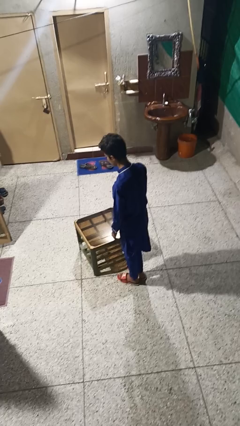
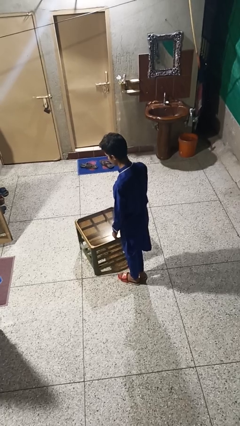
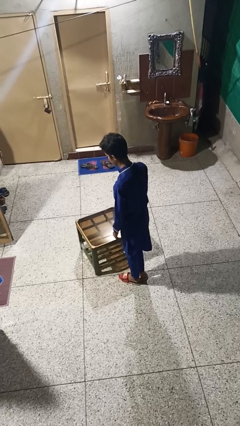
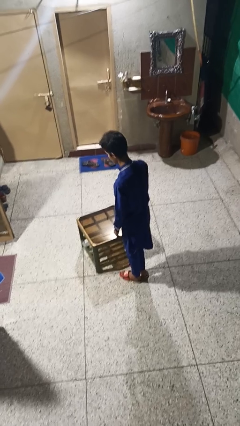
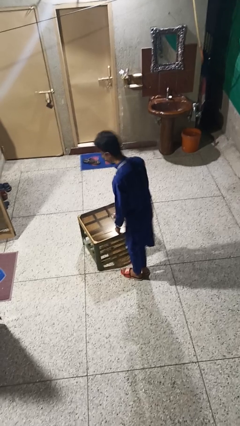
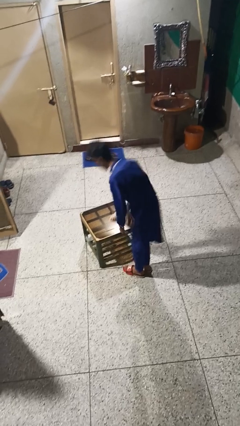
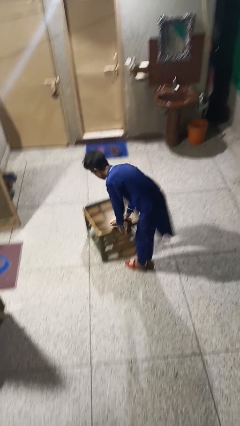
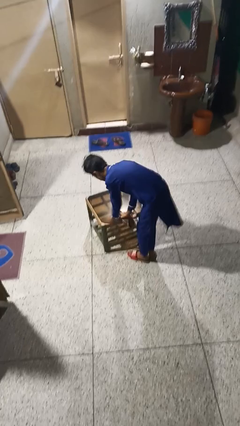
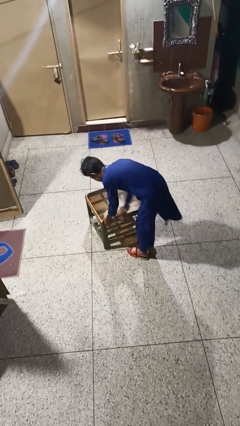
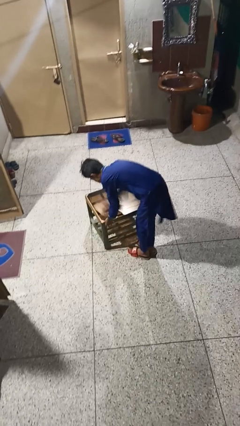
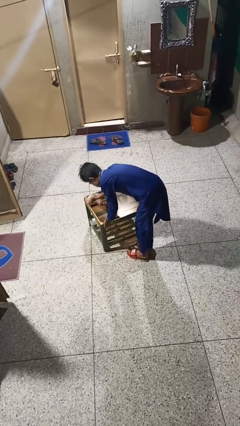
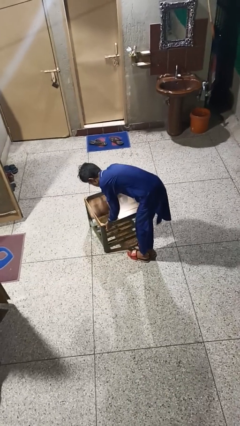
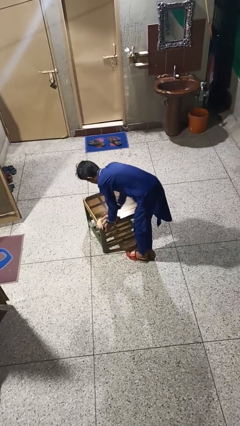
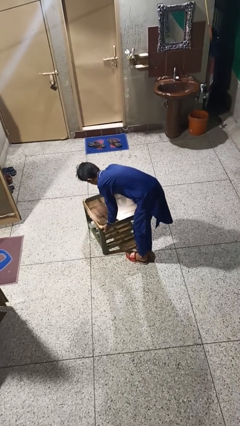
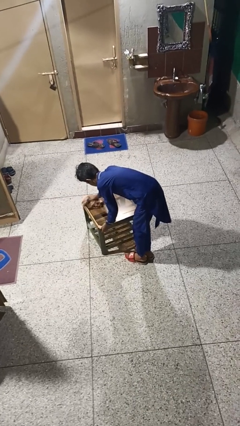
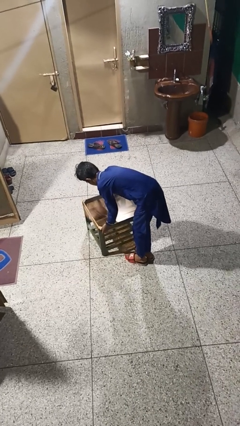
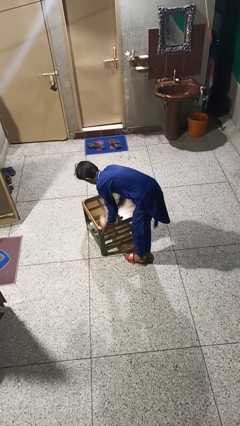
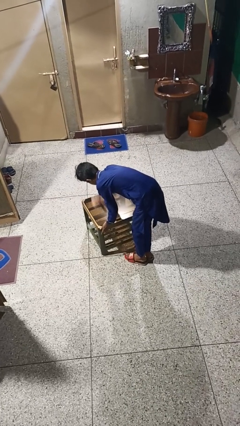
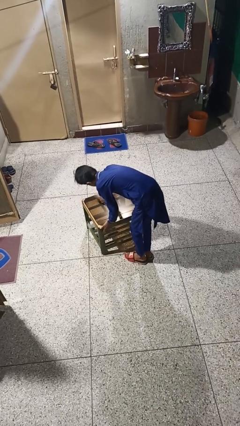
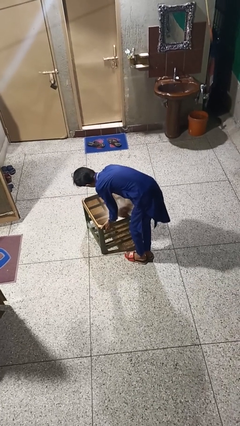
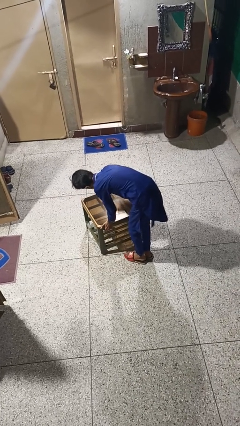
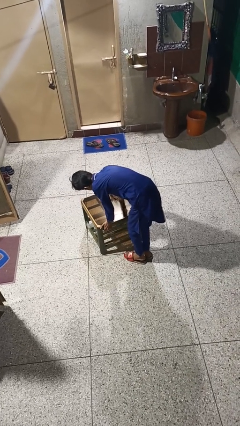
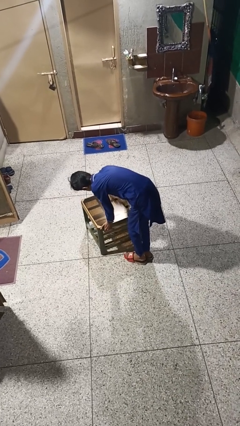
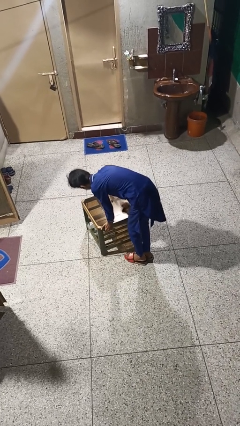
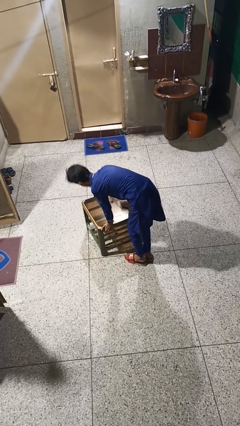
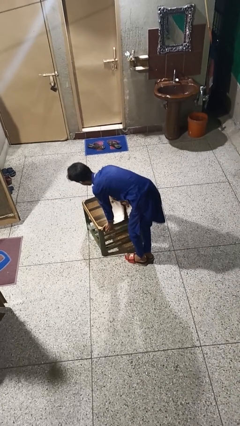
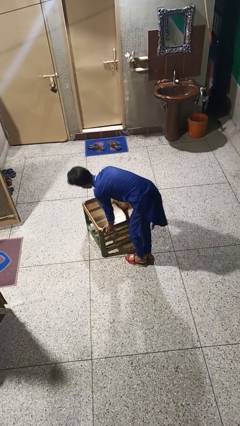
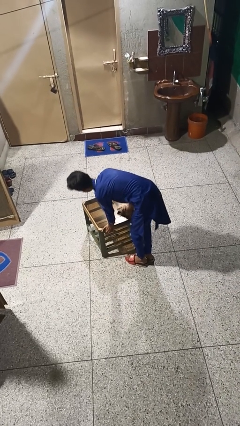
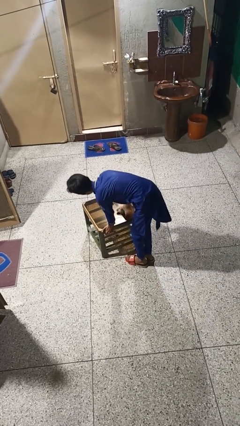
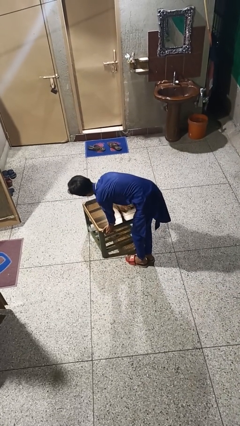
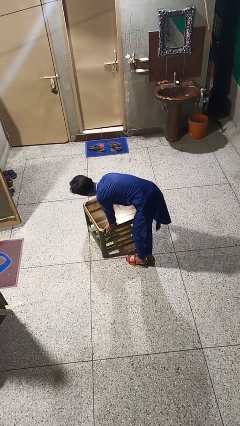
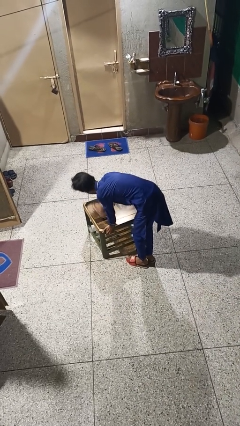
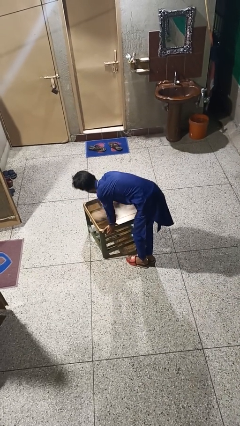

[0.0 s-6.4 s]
person cleans table with rag

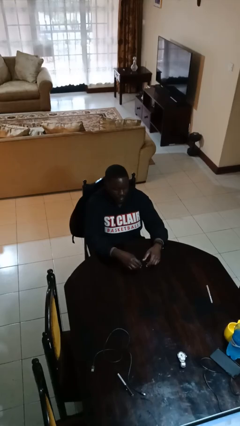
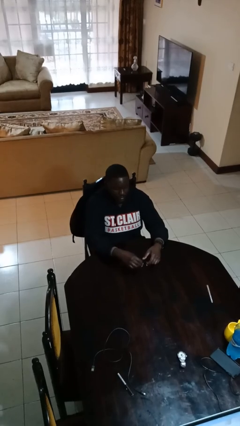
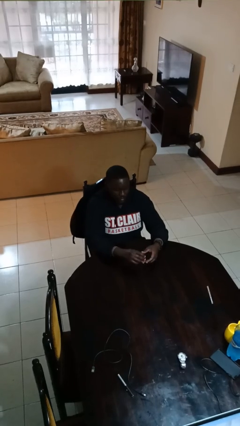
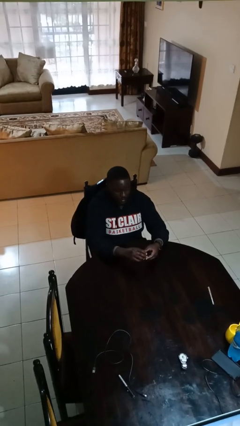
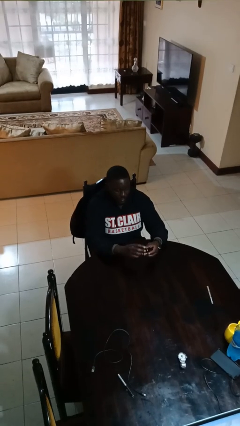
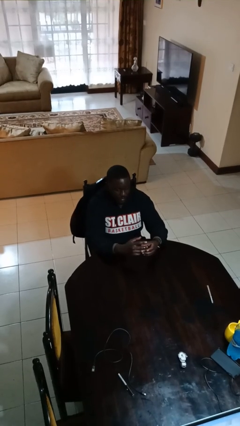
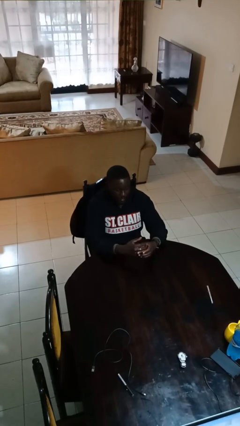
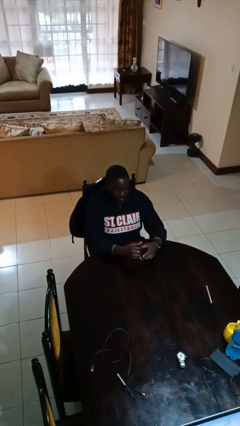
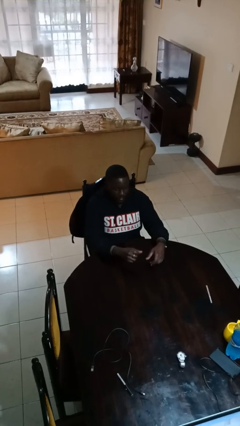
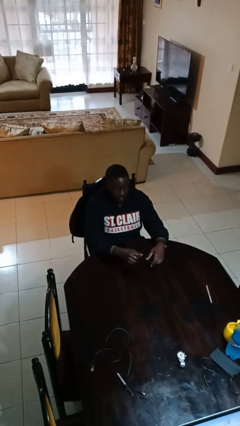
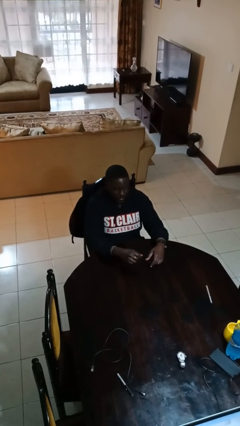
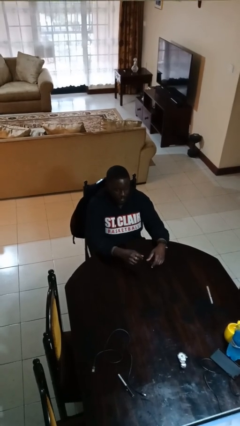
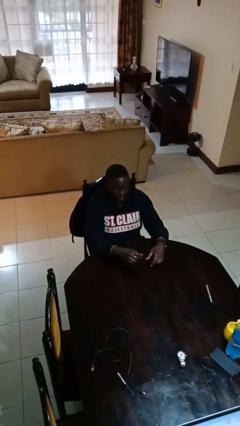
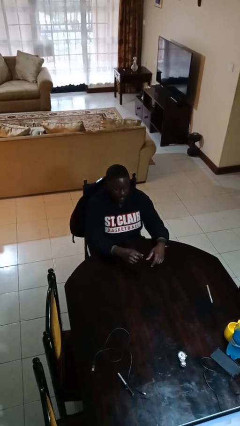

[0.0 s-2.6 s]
person puts on ring

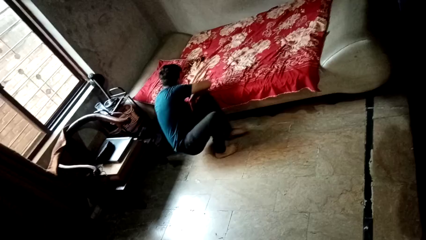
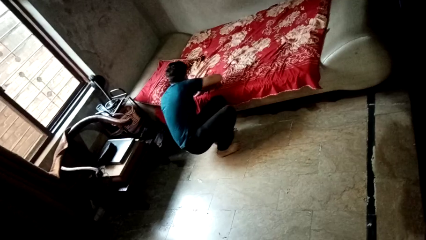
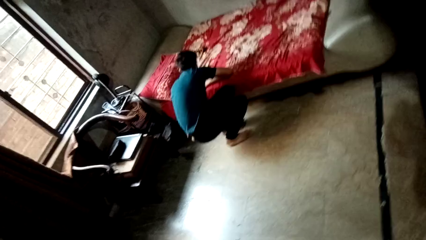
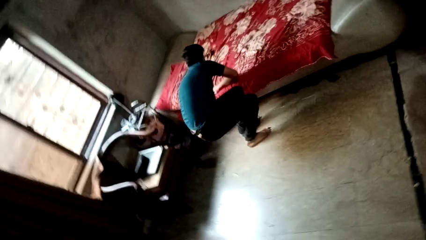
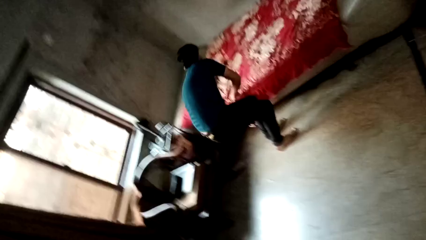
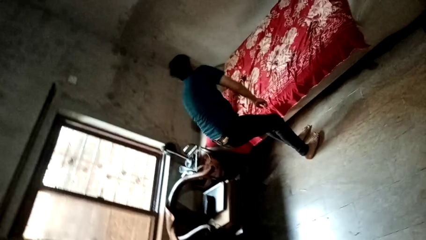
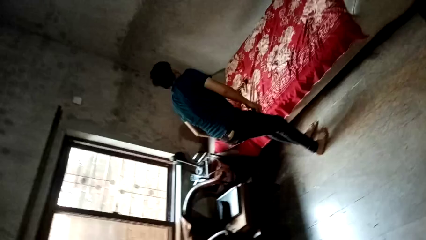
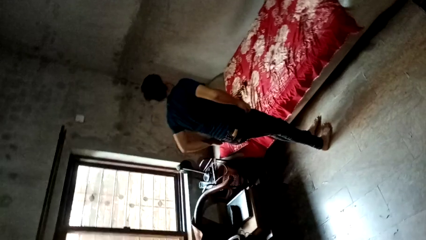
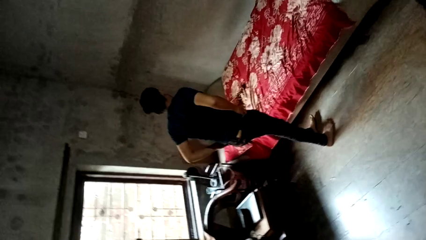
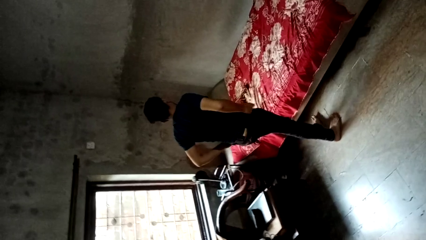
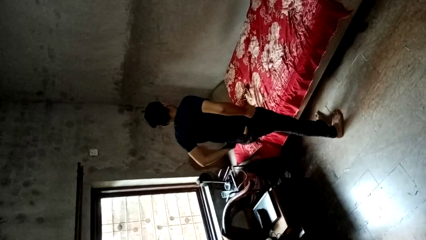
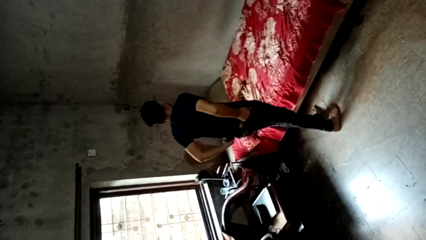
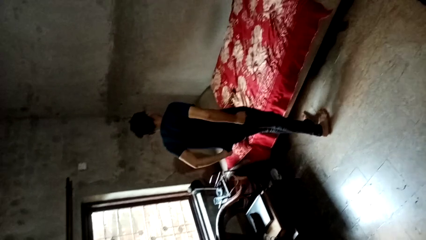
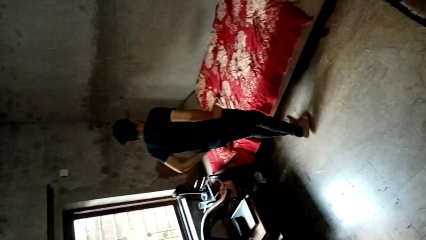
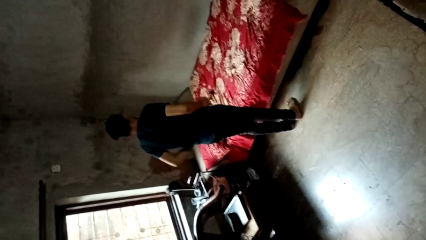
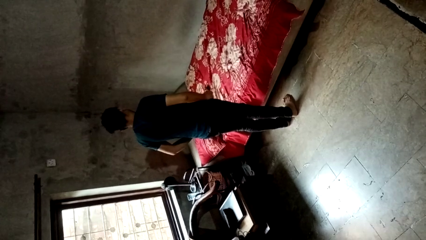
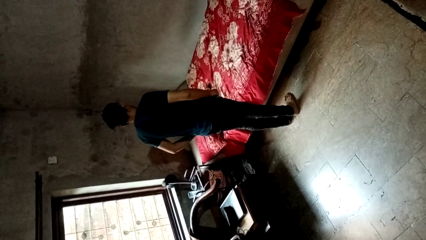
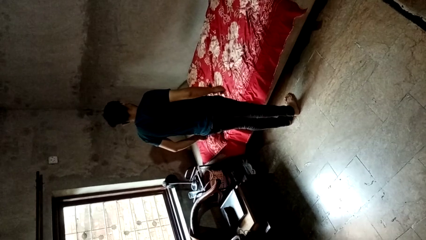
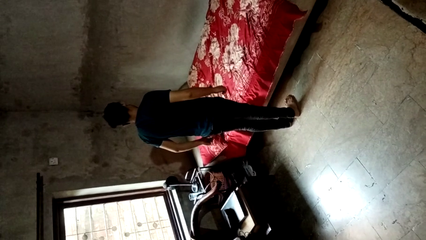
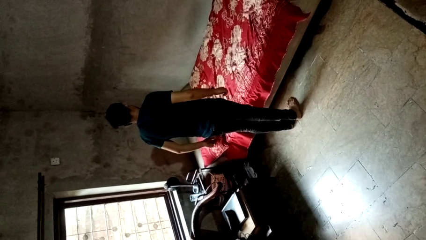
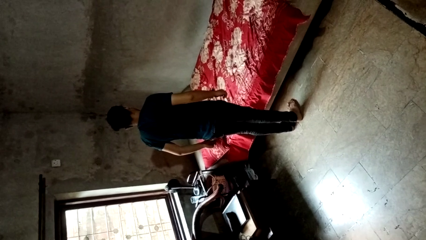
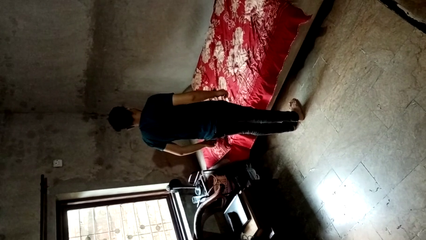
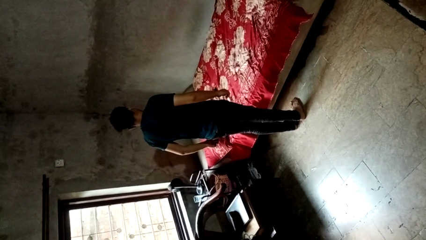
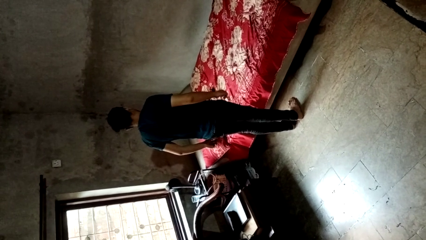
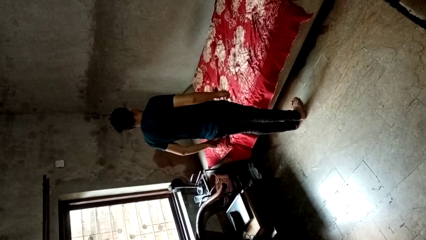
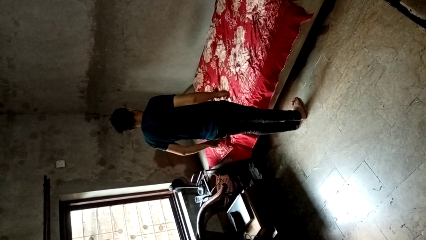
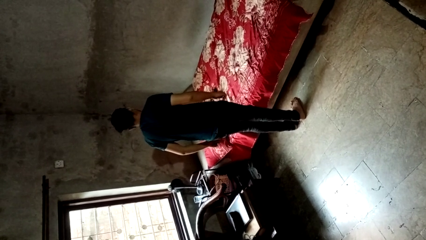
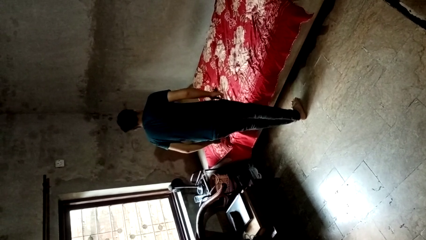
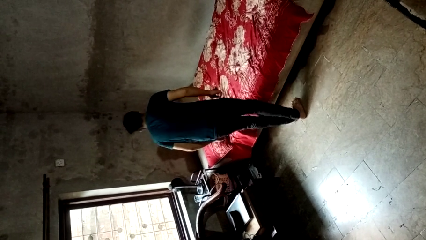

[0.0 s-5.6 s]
person stands up from floor

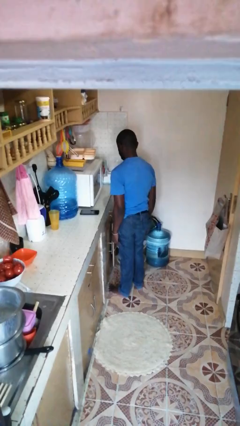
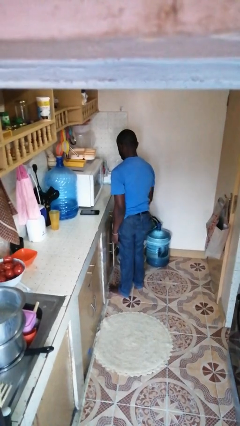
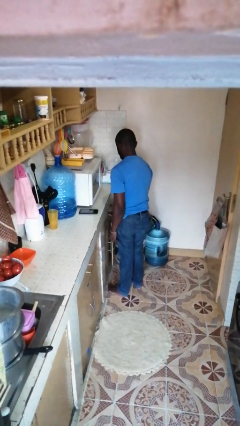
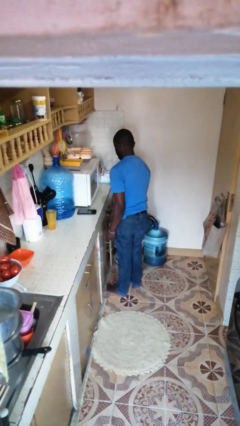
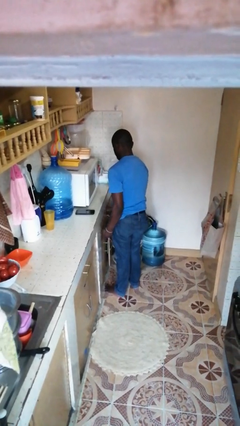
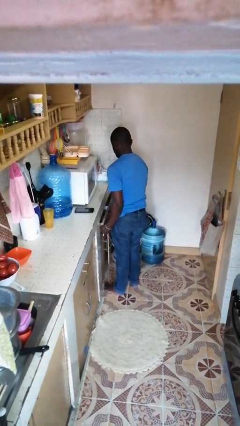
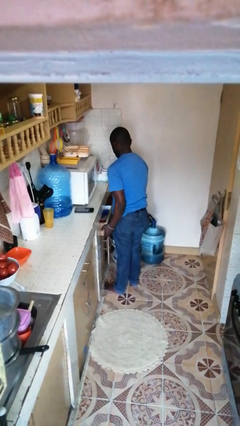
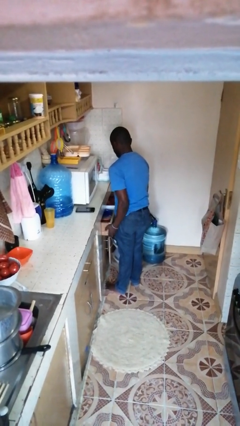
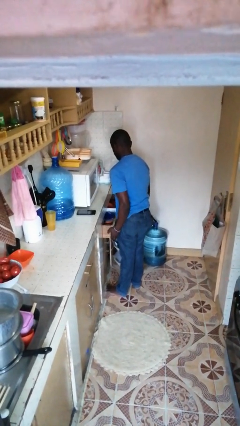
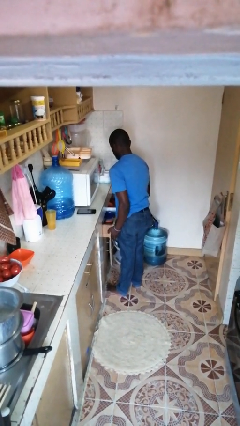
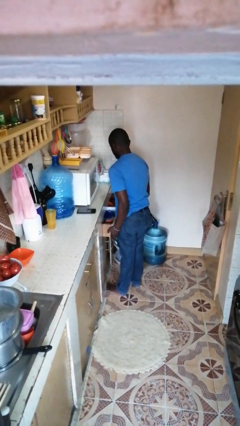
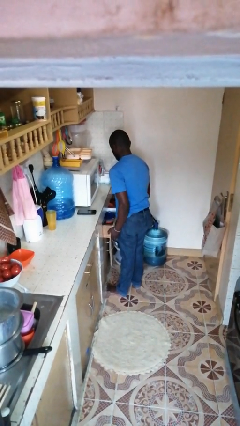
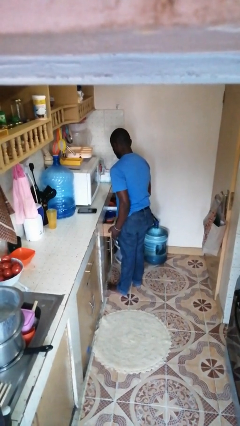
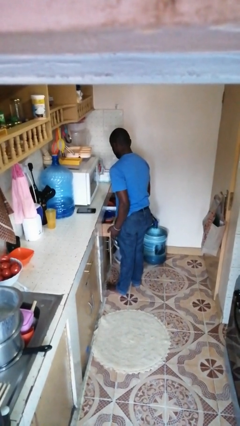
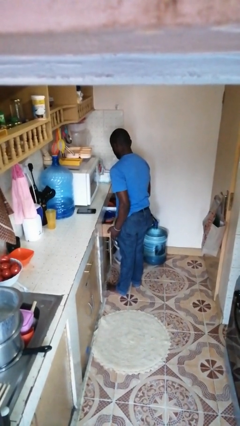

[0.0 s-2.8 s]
person opens kitchen drawer

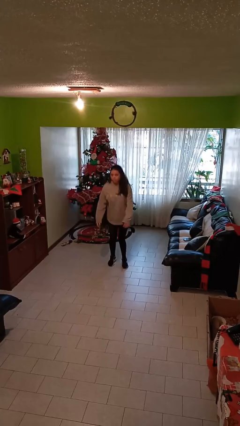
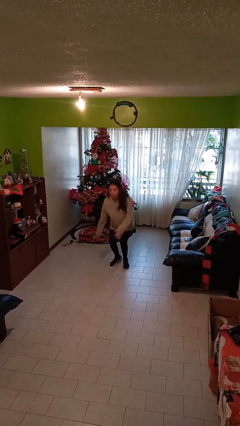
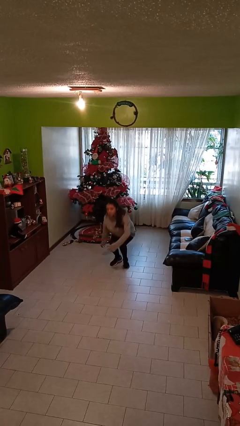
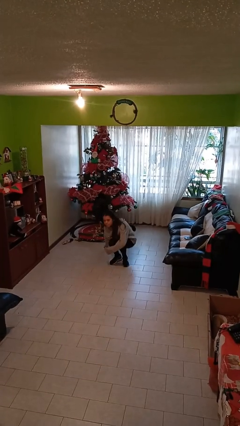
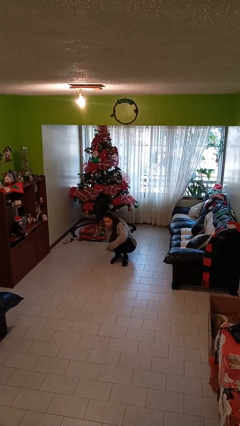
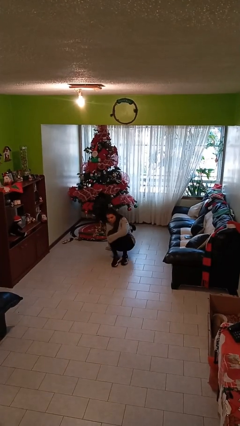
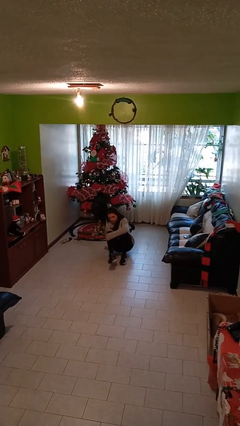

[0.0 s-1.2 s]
person sits down
